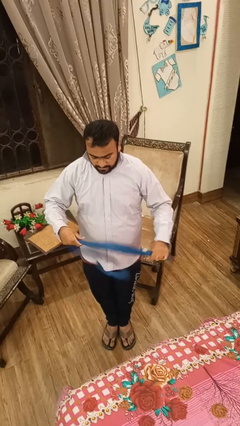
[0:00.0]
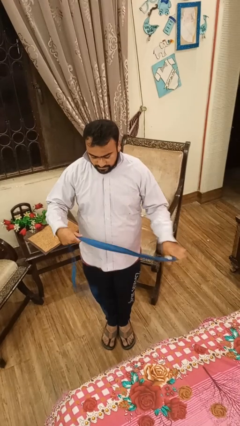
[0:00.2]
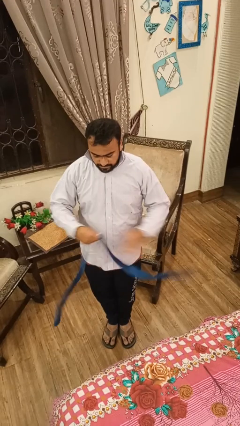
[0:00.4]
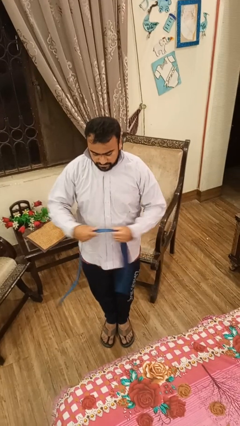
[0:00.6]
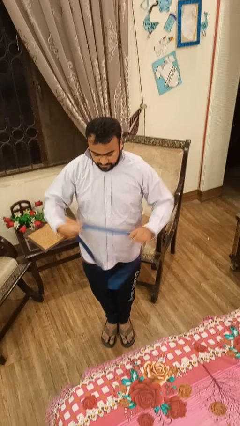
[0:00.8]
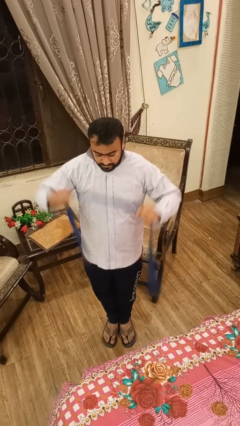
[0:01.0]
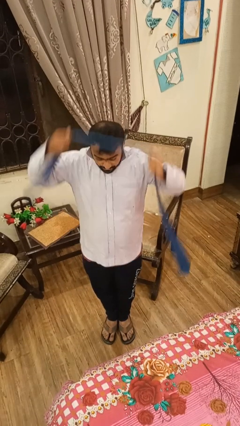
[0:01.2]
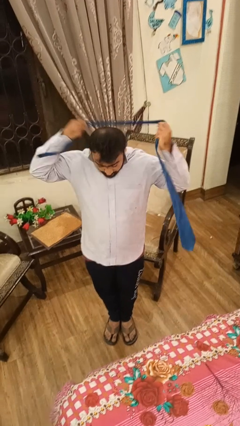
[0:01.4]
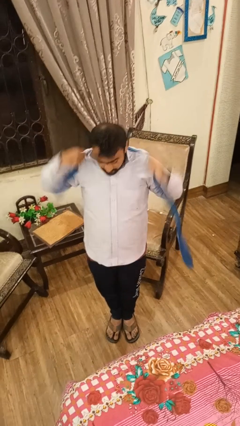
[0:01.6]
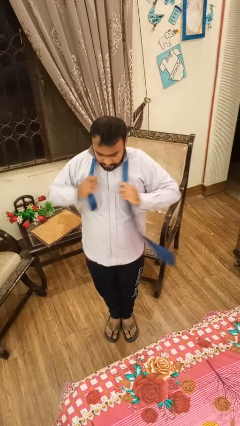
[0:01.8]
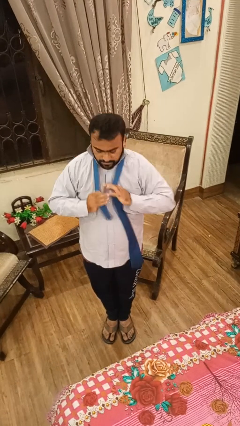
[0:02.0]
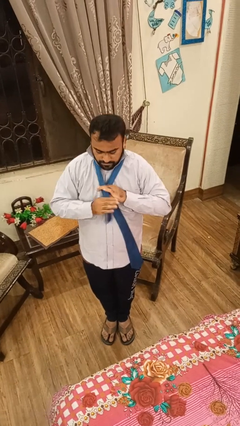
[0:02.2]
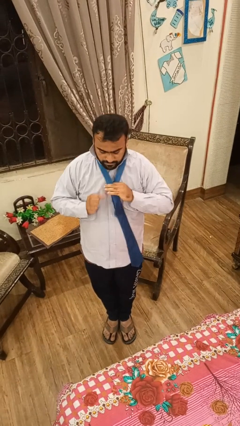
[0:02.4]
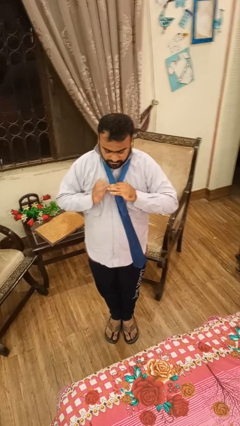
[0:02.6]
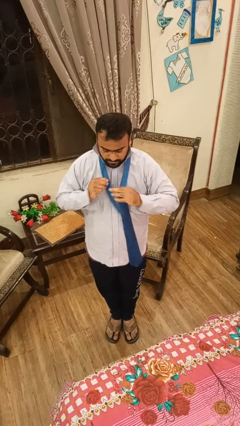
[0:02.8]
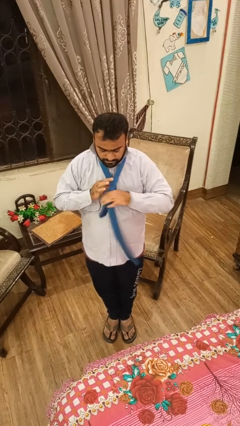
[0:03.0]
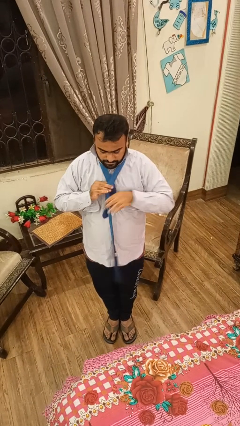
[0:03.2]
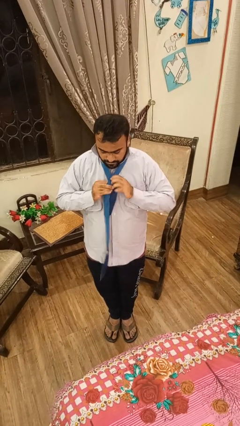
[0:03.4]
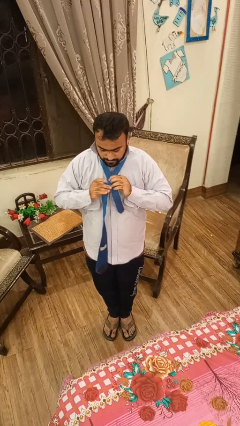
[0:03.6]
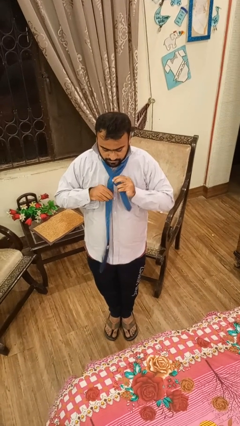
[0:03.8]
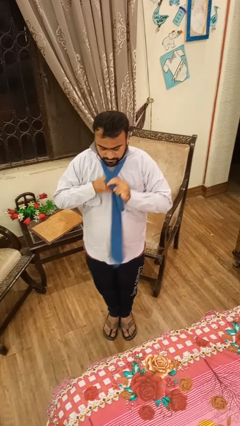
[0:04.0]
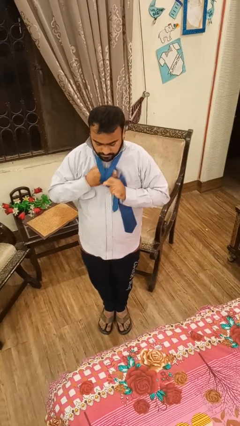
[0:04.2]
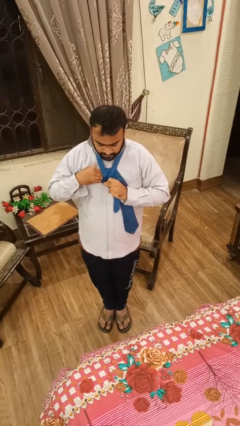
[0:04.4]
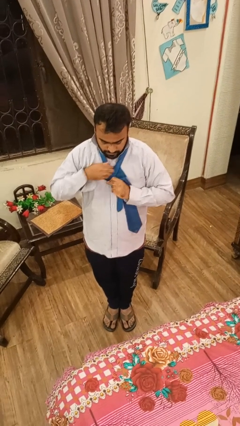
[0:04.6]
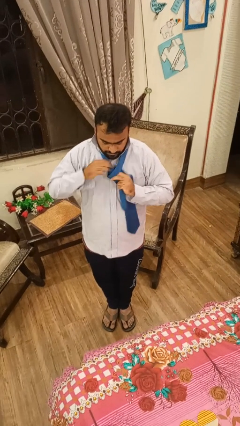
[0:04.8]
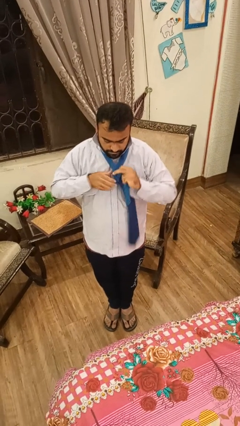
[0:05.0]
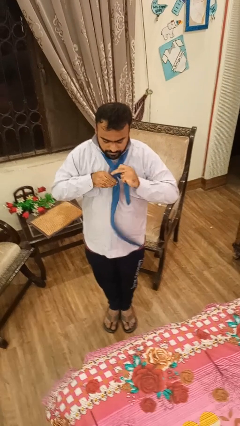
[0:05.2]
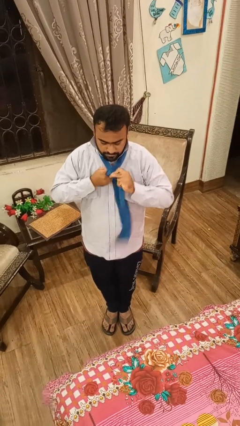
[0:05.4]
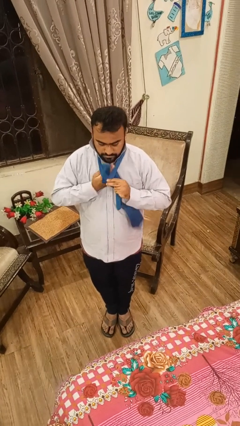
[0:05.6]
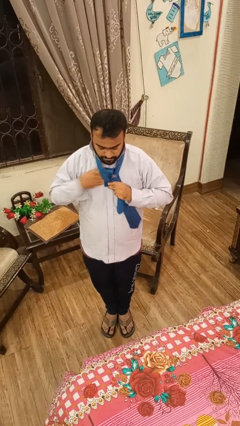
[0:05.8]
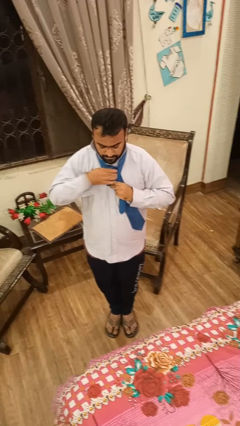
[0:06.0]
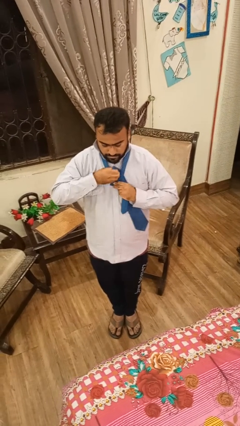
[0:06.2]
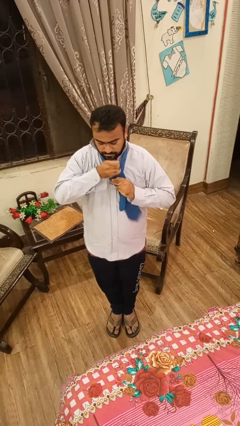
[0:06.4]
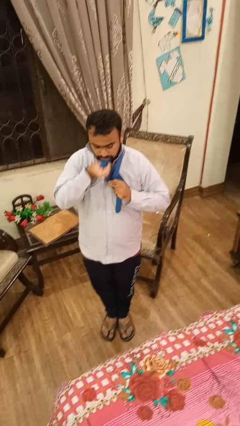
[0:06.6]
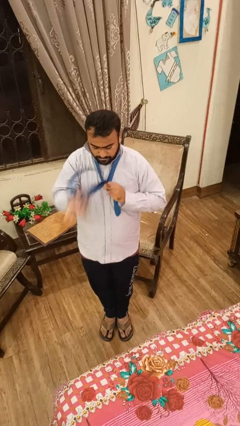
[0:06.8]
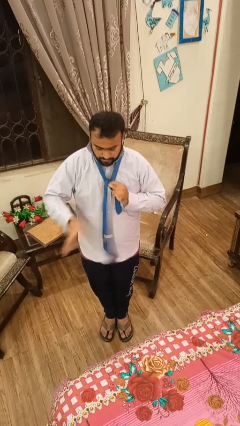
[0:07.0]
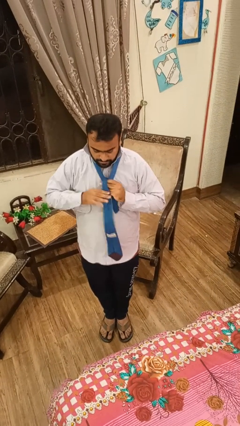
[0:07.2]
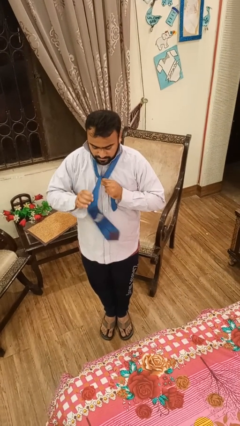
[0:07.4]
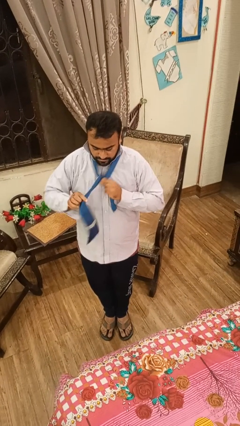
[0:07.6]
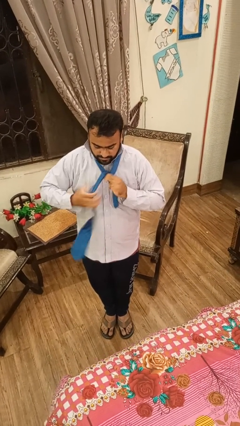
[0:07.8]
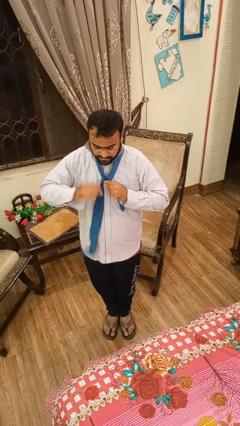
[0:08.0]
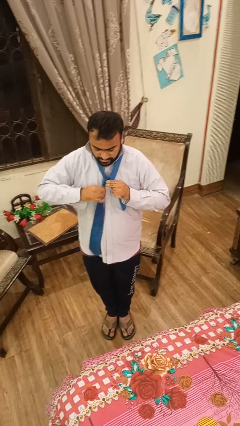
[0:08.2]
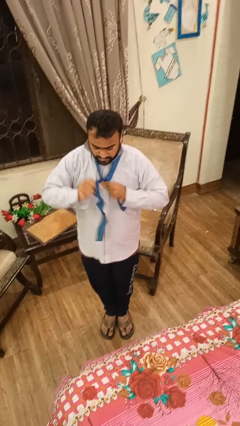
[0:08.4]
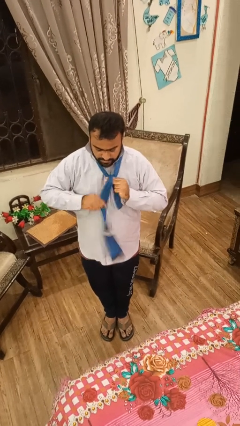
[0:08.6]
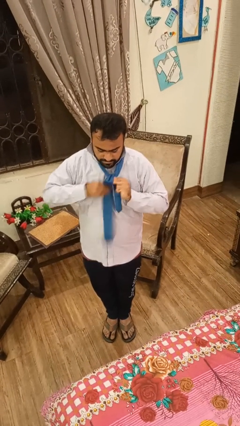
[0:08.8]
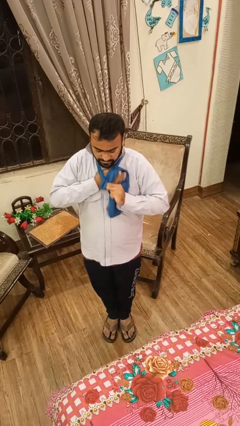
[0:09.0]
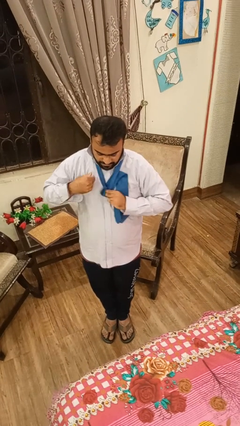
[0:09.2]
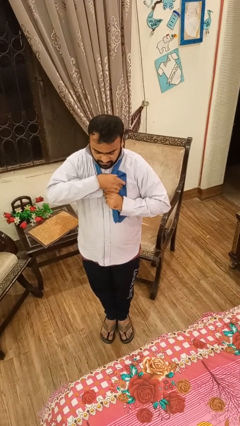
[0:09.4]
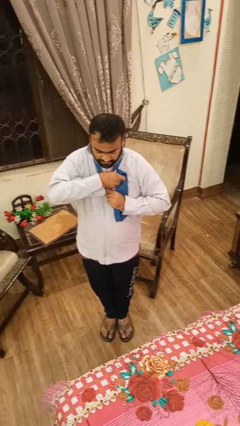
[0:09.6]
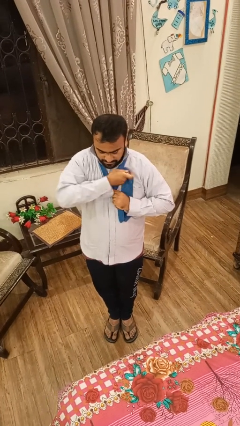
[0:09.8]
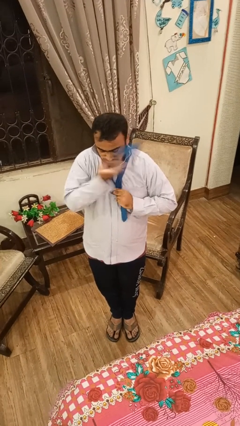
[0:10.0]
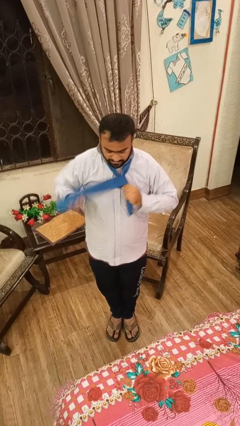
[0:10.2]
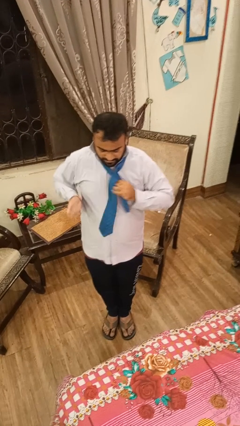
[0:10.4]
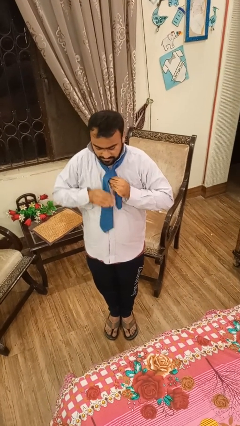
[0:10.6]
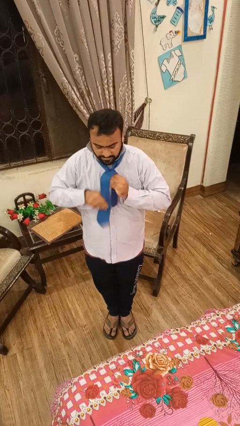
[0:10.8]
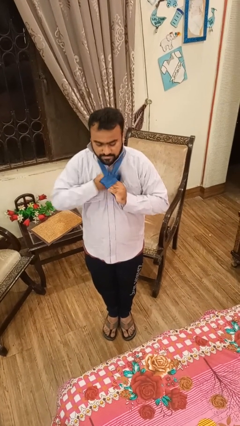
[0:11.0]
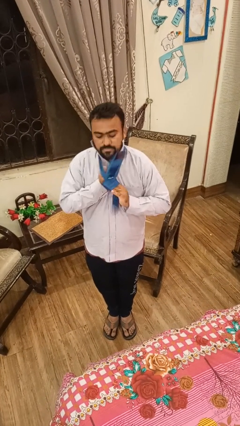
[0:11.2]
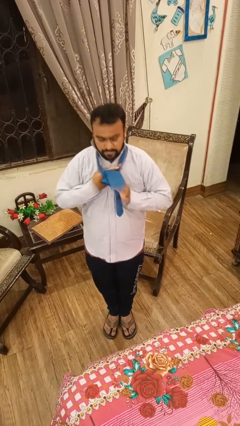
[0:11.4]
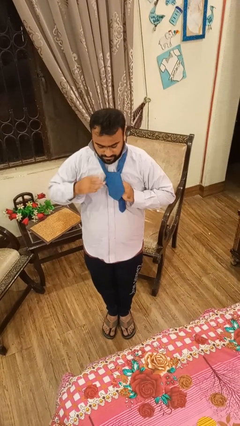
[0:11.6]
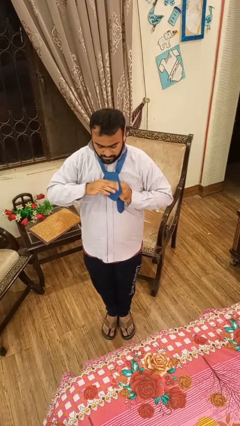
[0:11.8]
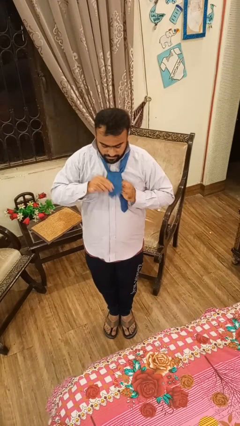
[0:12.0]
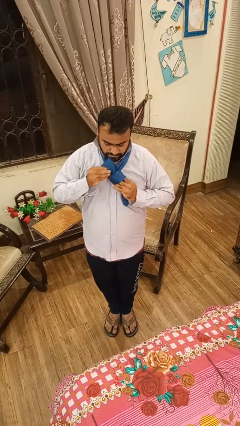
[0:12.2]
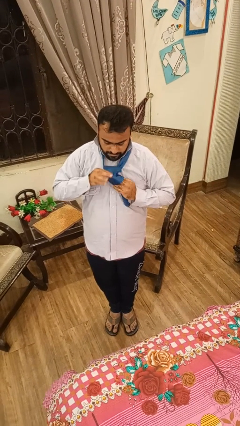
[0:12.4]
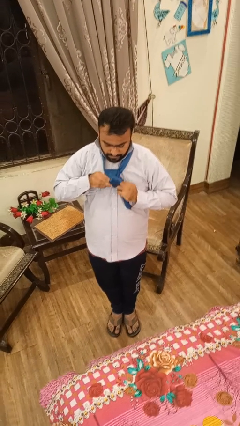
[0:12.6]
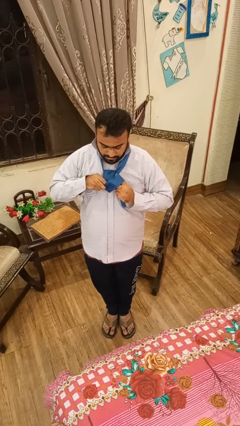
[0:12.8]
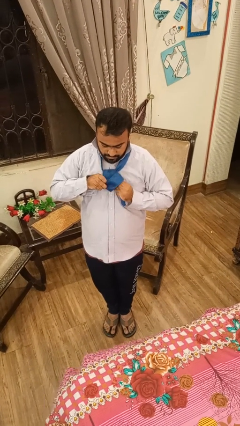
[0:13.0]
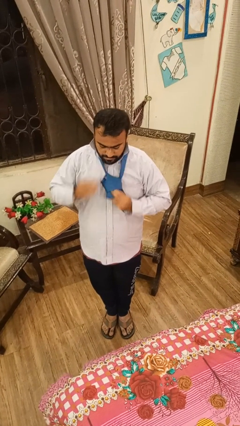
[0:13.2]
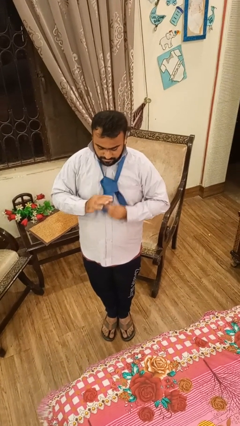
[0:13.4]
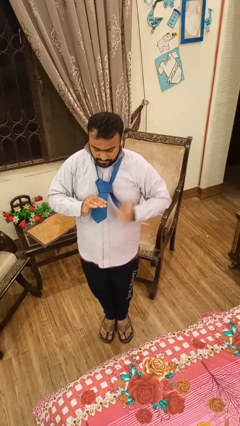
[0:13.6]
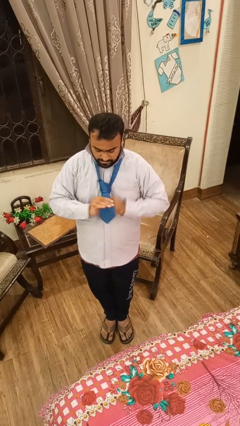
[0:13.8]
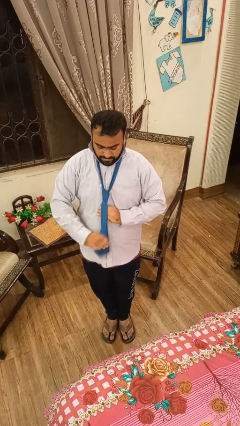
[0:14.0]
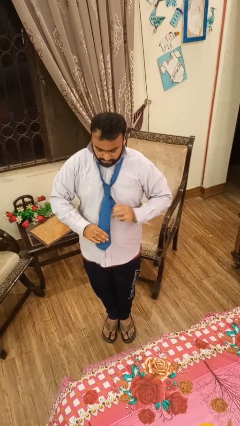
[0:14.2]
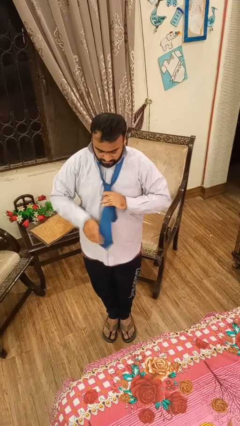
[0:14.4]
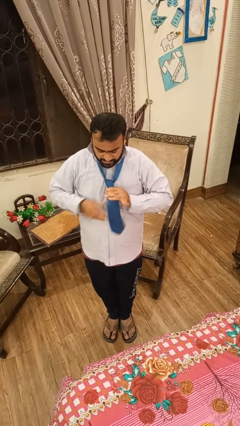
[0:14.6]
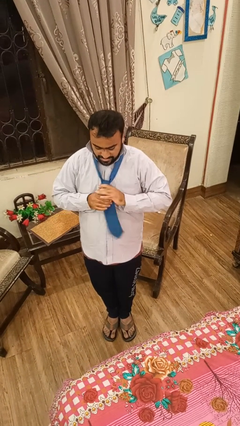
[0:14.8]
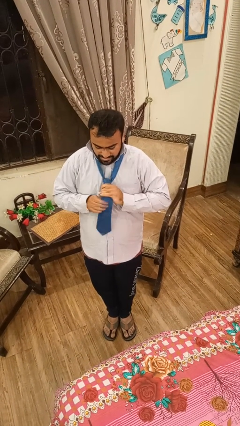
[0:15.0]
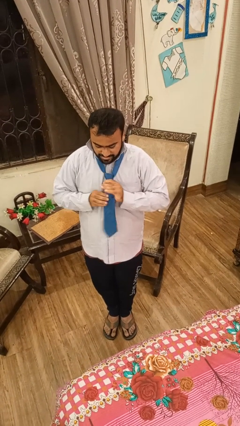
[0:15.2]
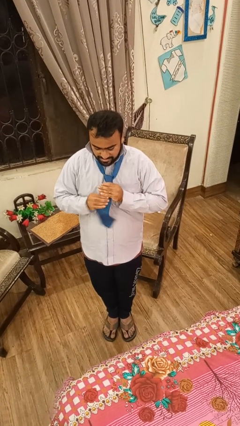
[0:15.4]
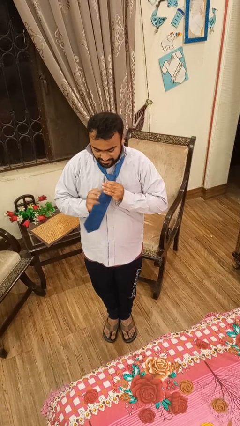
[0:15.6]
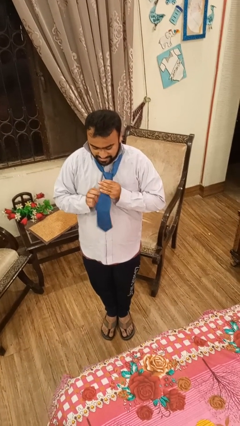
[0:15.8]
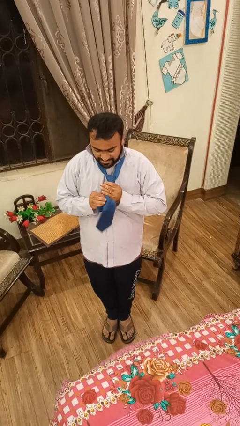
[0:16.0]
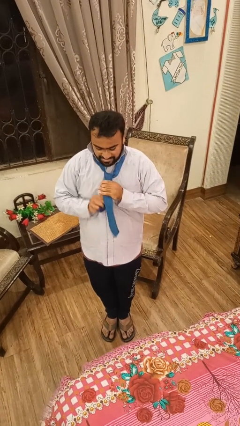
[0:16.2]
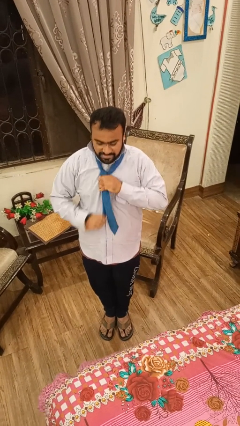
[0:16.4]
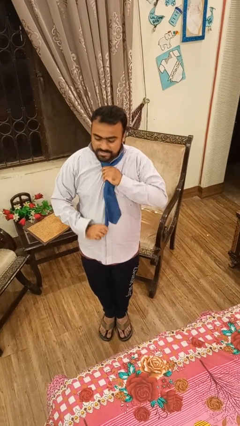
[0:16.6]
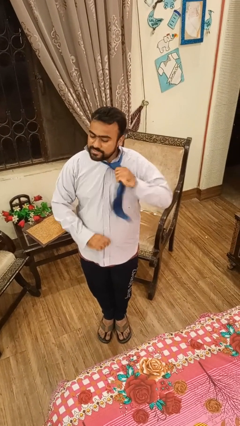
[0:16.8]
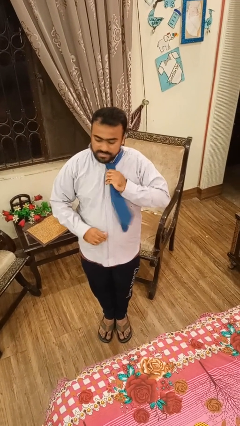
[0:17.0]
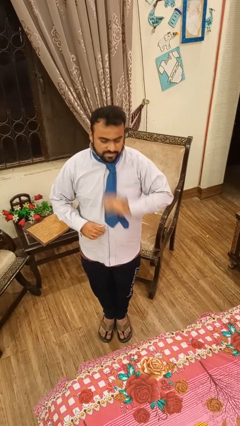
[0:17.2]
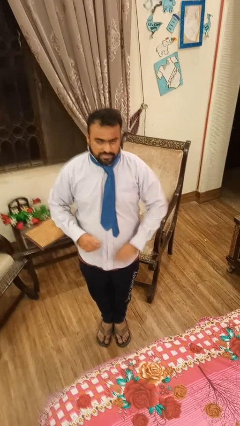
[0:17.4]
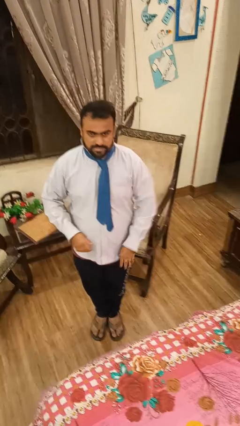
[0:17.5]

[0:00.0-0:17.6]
person puts on necktie

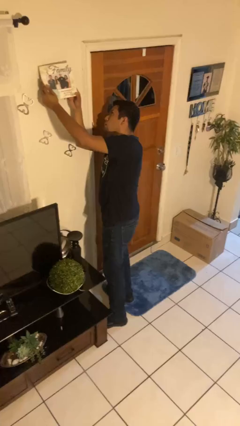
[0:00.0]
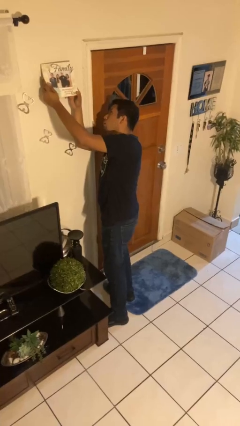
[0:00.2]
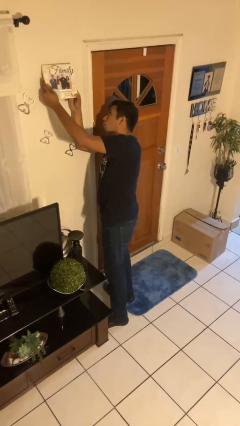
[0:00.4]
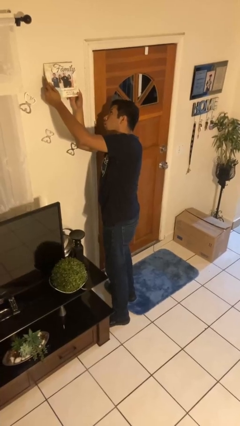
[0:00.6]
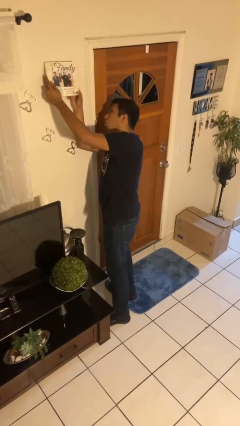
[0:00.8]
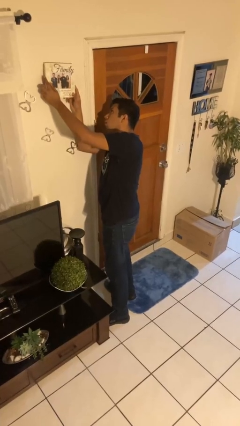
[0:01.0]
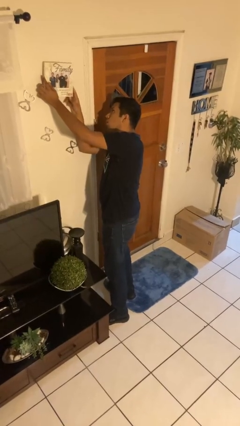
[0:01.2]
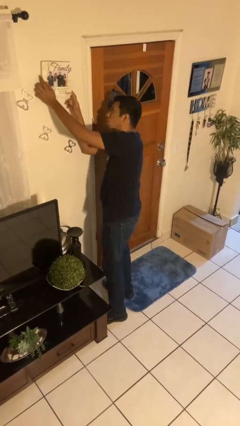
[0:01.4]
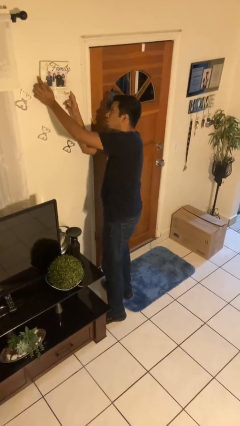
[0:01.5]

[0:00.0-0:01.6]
person puts up picture frame
